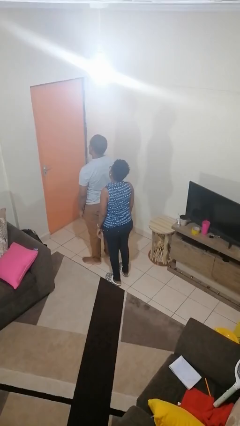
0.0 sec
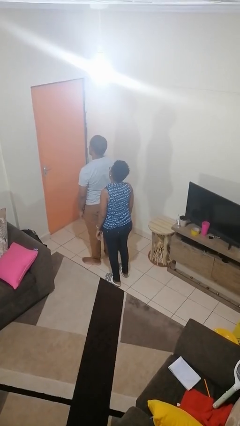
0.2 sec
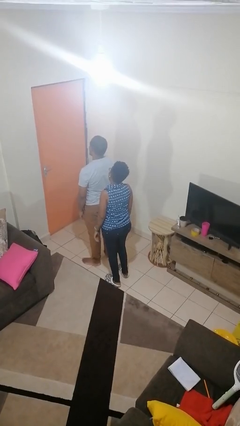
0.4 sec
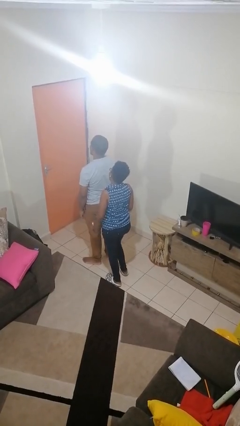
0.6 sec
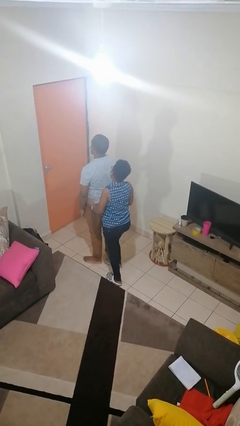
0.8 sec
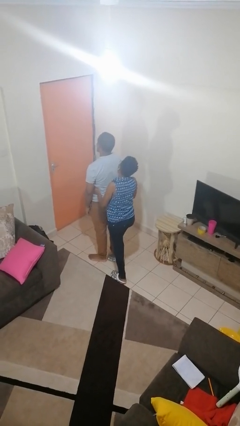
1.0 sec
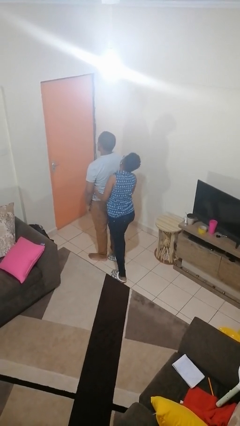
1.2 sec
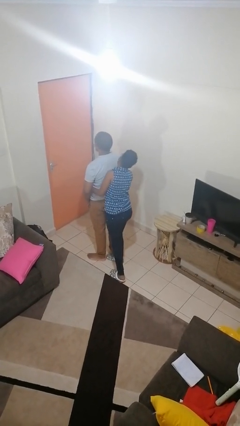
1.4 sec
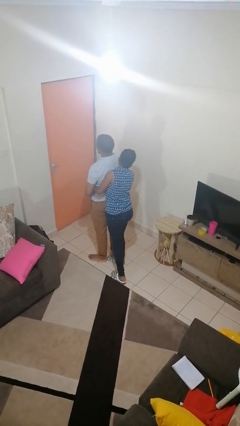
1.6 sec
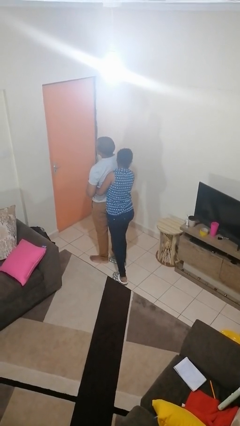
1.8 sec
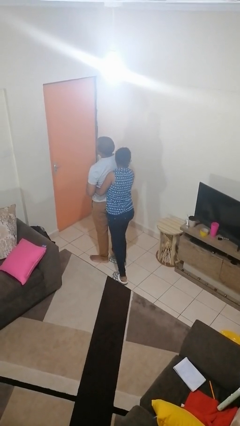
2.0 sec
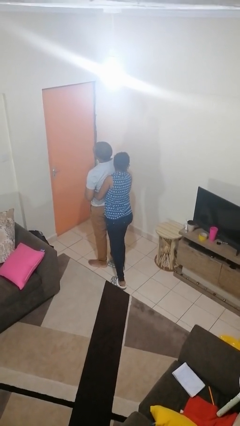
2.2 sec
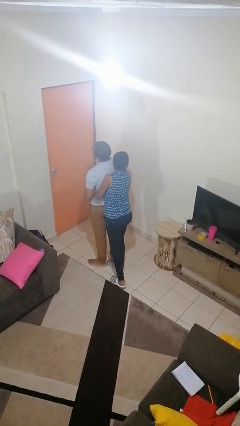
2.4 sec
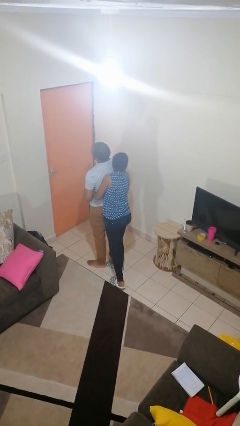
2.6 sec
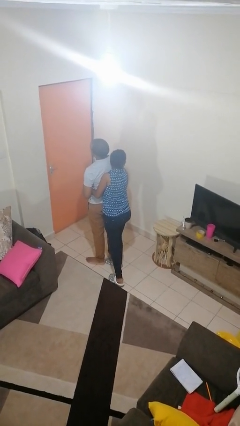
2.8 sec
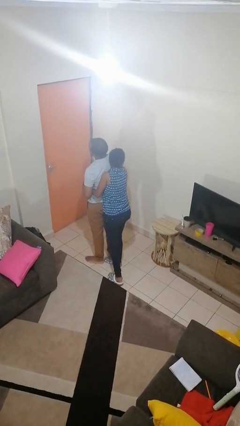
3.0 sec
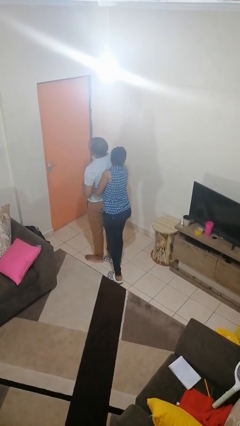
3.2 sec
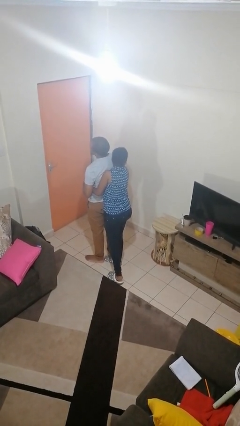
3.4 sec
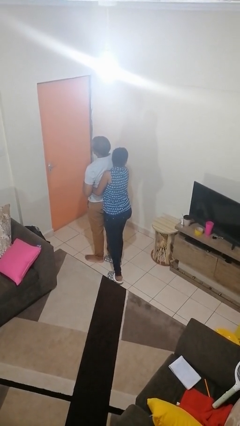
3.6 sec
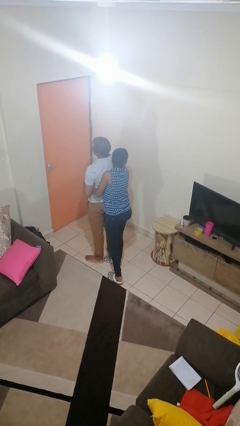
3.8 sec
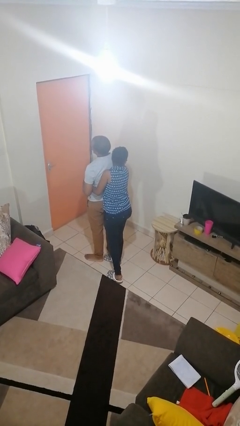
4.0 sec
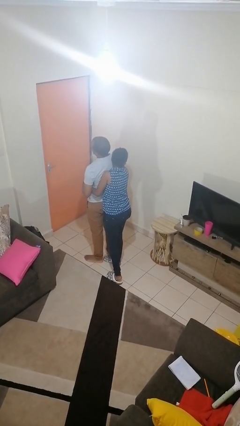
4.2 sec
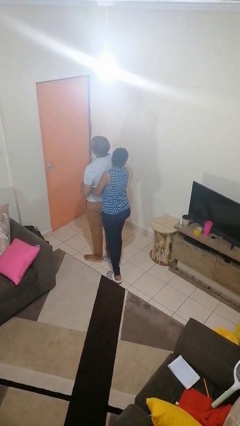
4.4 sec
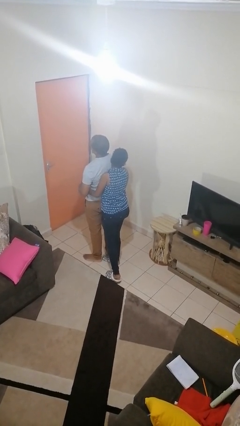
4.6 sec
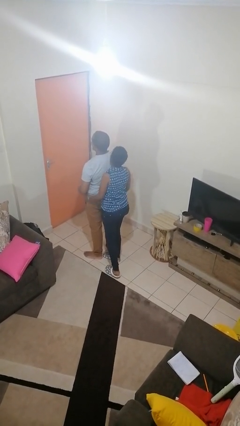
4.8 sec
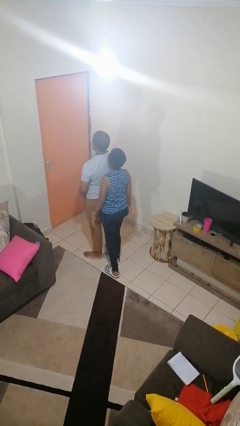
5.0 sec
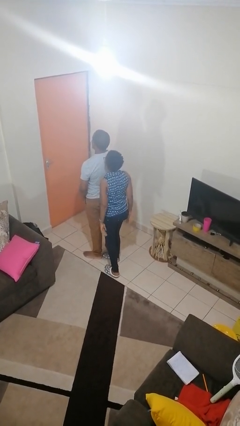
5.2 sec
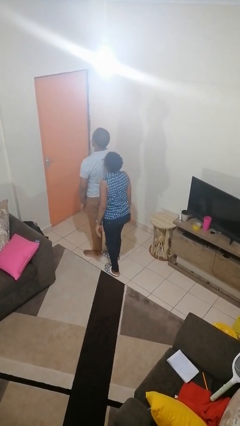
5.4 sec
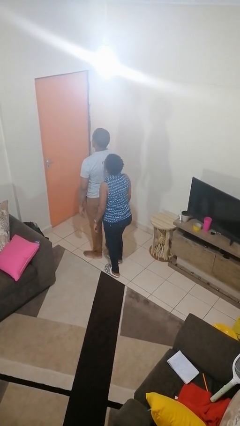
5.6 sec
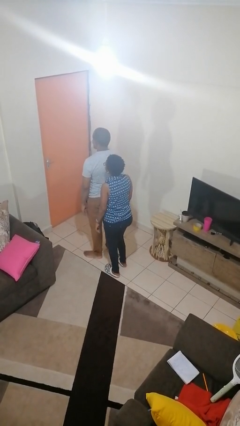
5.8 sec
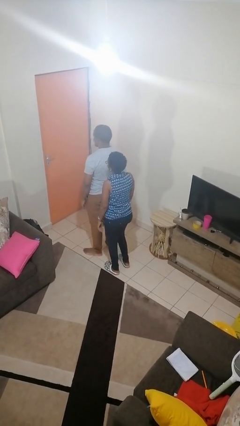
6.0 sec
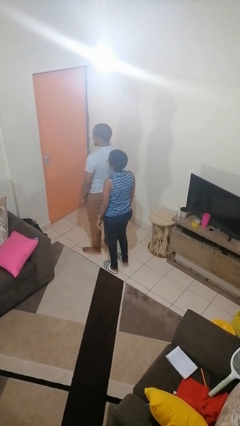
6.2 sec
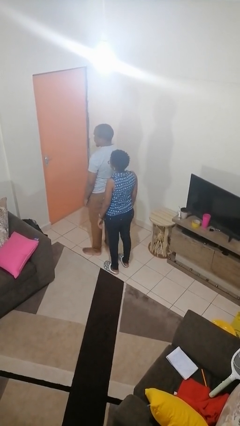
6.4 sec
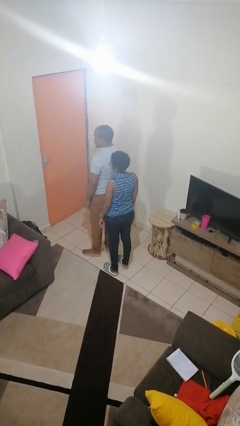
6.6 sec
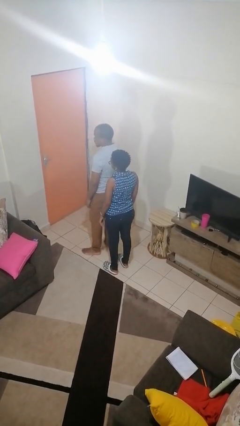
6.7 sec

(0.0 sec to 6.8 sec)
person hugs person from behind

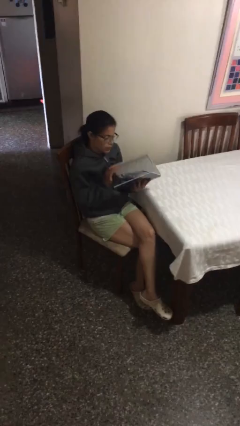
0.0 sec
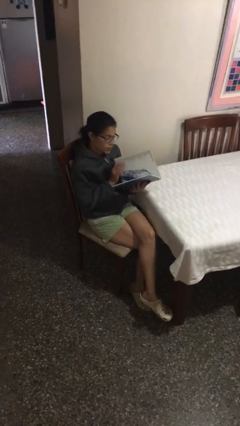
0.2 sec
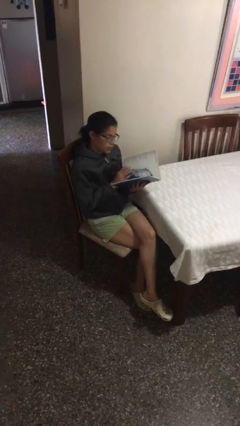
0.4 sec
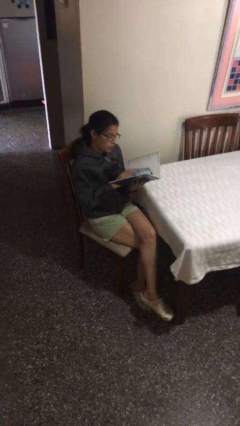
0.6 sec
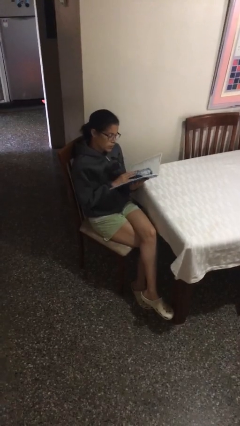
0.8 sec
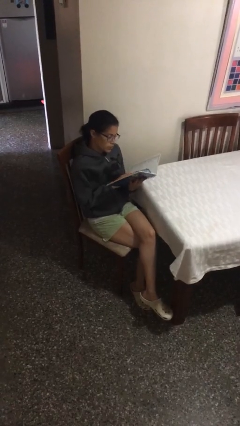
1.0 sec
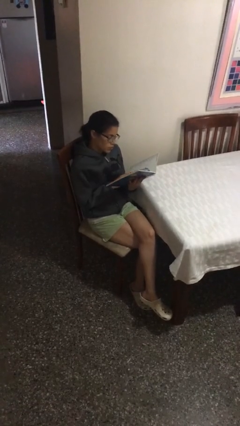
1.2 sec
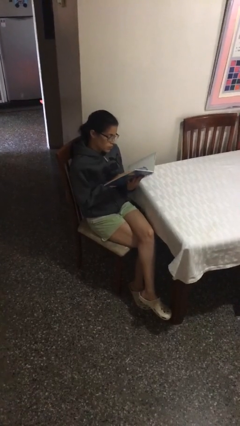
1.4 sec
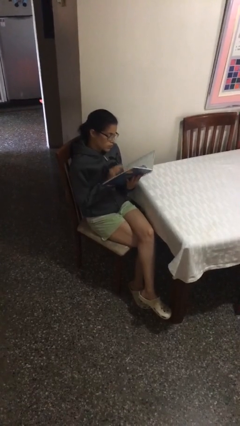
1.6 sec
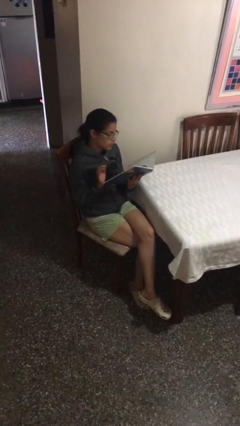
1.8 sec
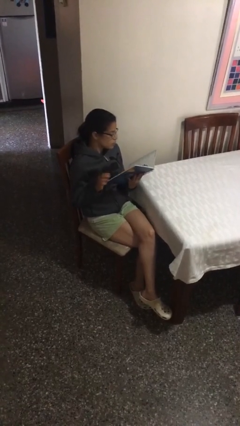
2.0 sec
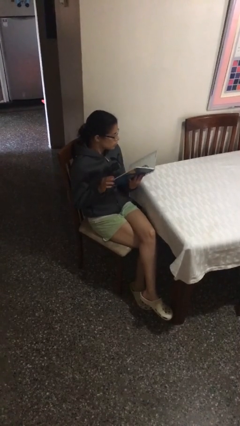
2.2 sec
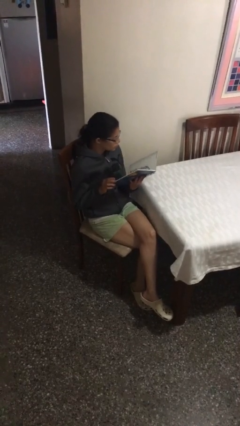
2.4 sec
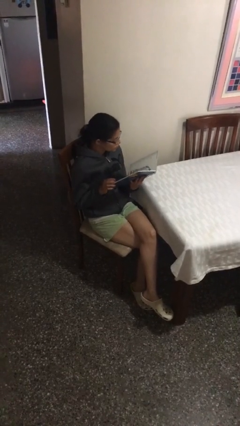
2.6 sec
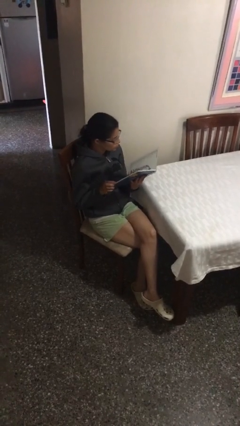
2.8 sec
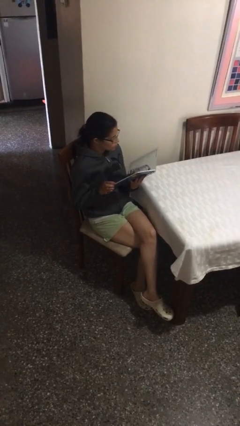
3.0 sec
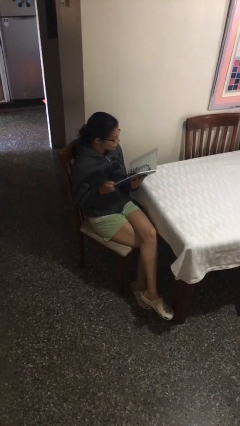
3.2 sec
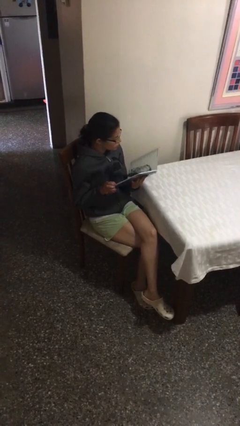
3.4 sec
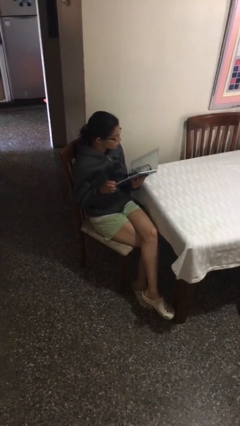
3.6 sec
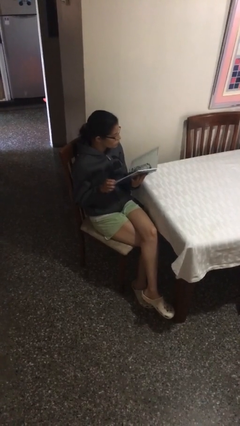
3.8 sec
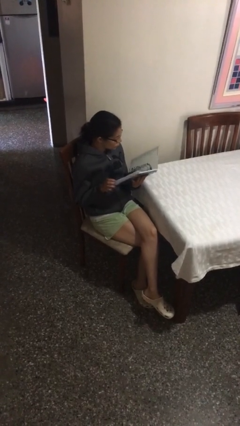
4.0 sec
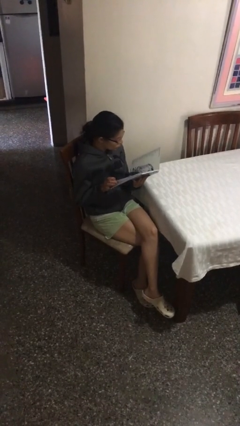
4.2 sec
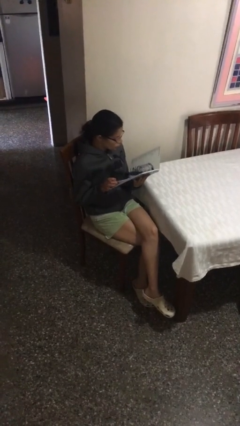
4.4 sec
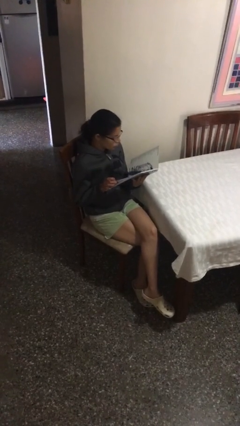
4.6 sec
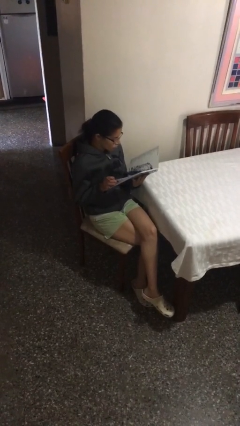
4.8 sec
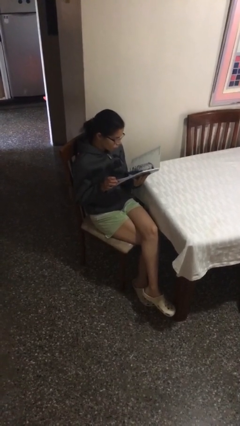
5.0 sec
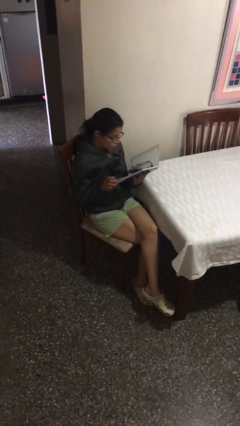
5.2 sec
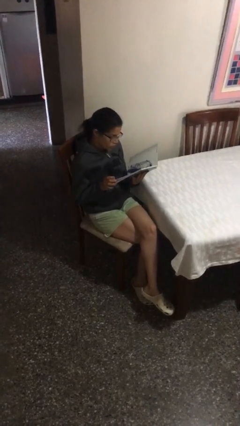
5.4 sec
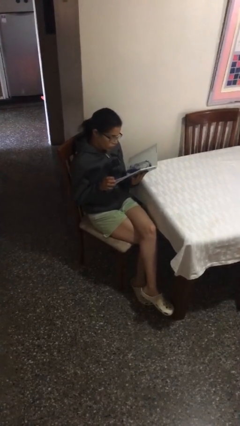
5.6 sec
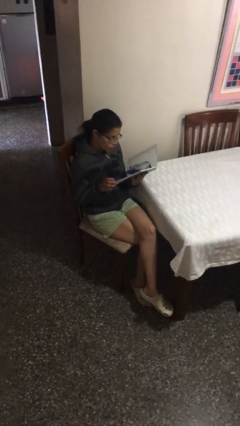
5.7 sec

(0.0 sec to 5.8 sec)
person reads document

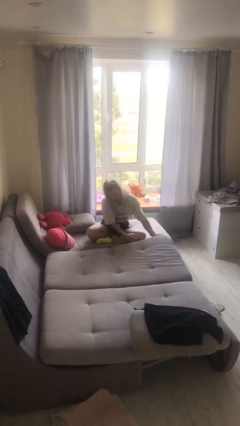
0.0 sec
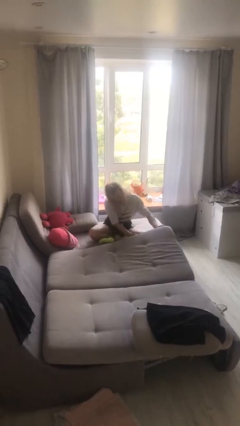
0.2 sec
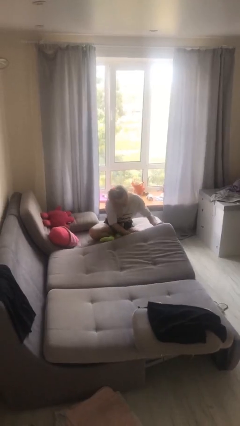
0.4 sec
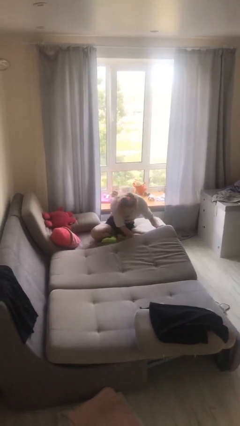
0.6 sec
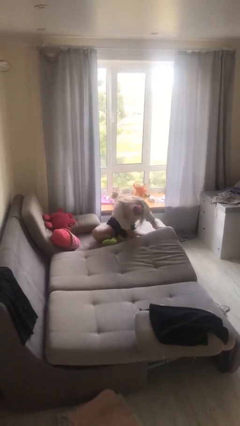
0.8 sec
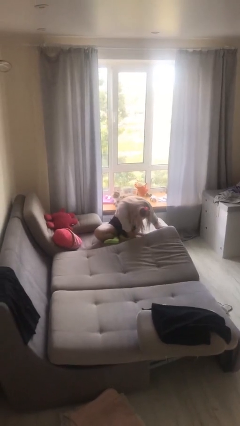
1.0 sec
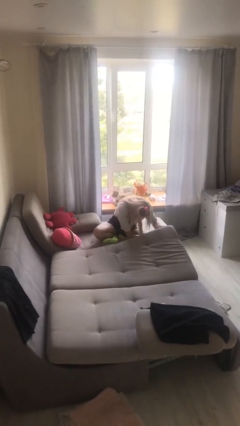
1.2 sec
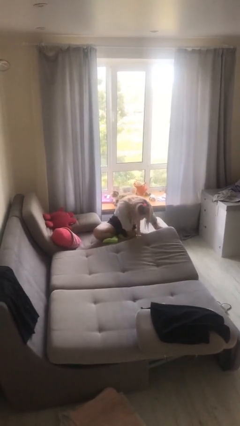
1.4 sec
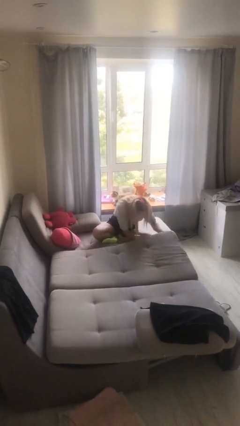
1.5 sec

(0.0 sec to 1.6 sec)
person searches under bed

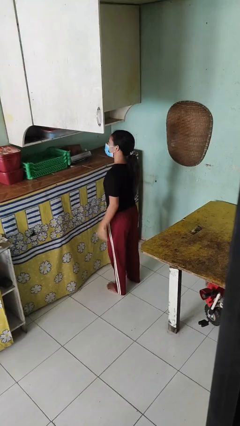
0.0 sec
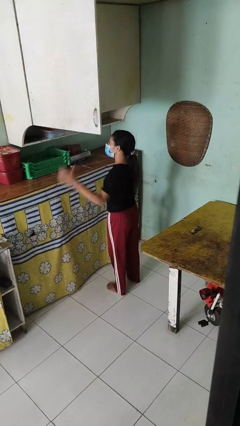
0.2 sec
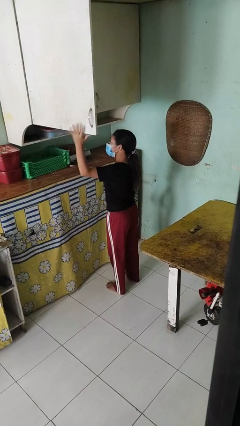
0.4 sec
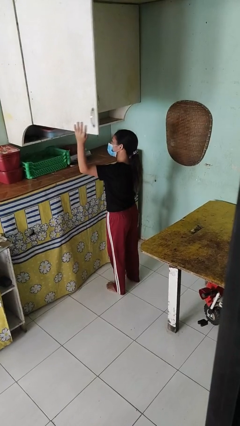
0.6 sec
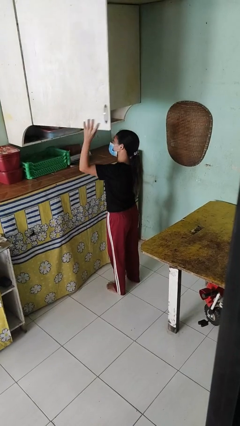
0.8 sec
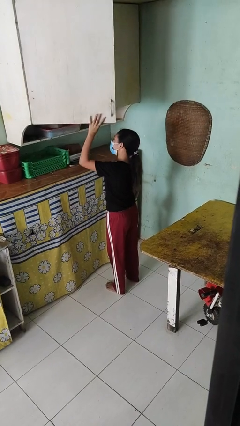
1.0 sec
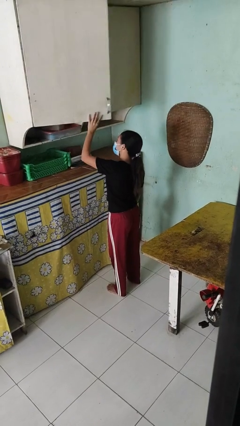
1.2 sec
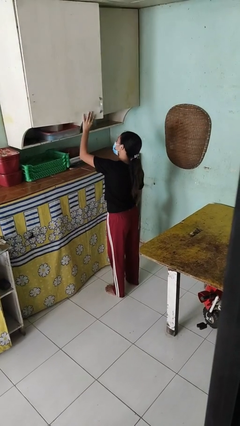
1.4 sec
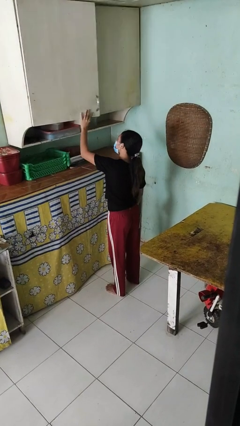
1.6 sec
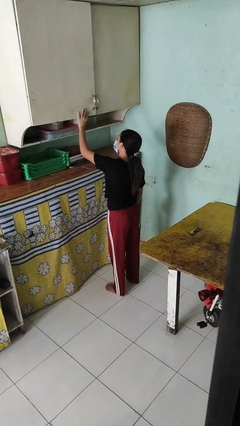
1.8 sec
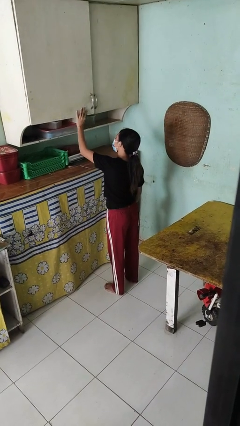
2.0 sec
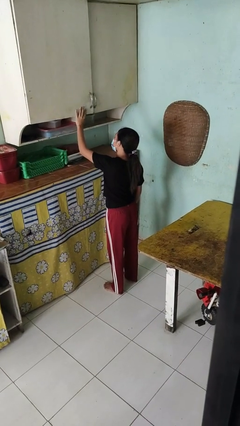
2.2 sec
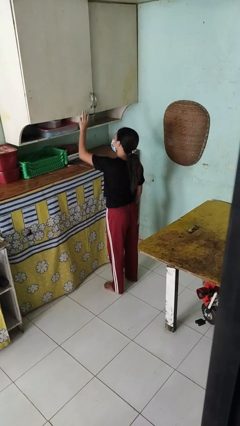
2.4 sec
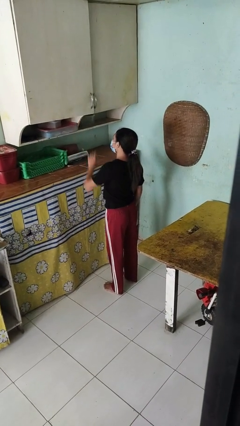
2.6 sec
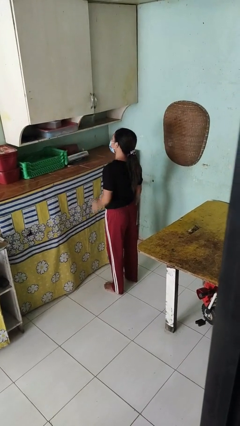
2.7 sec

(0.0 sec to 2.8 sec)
person closes cabinet

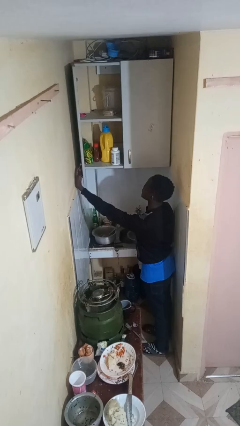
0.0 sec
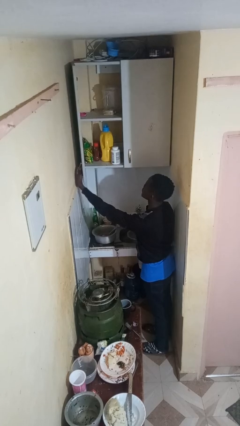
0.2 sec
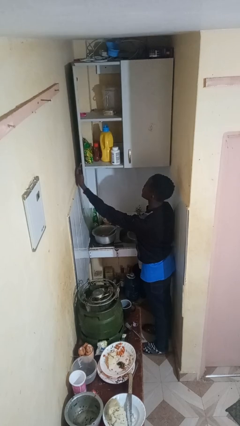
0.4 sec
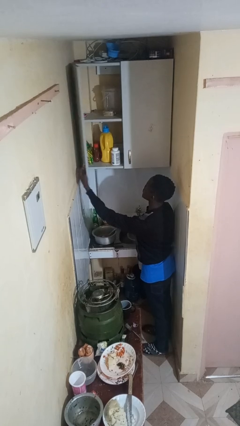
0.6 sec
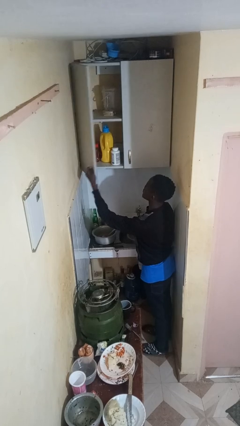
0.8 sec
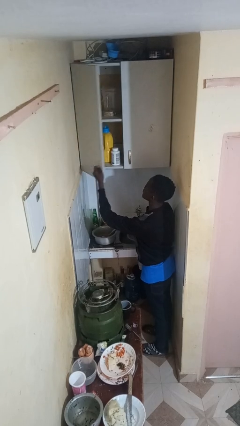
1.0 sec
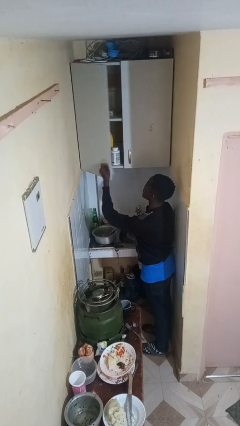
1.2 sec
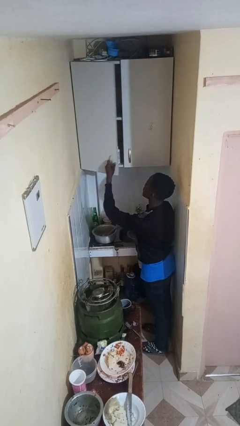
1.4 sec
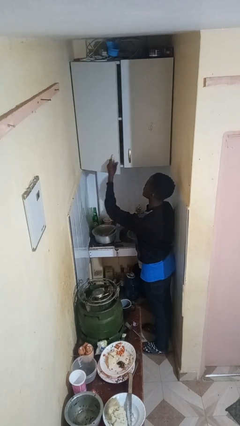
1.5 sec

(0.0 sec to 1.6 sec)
person closes kitchen drawer
